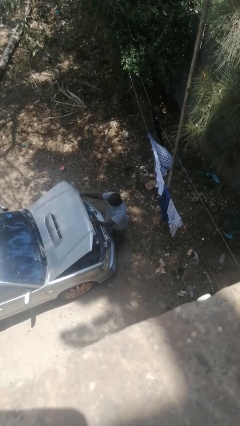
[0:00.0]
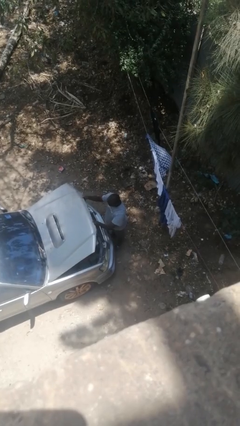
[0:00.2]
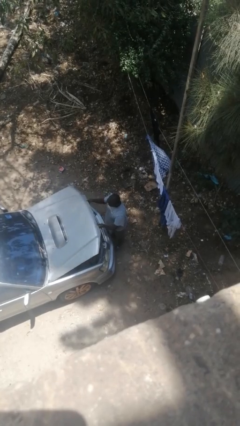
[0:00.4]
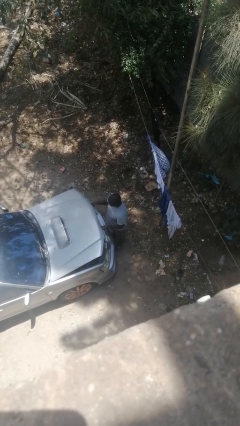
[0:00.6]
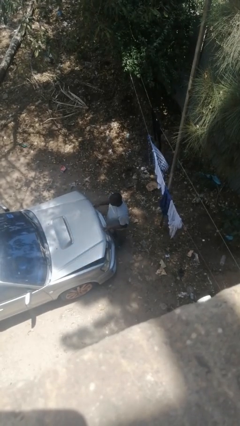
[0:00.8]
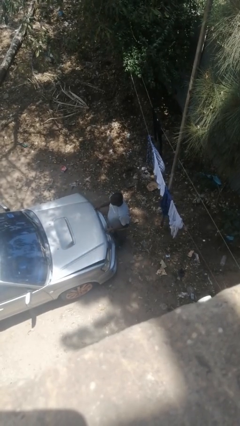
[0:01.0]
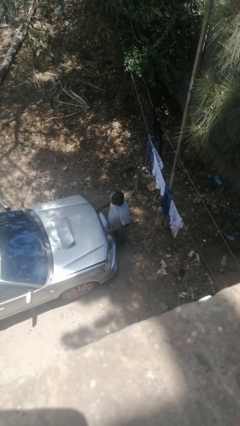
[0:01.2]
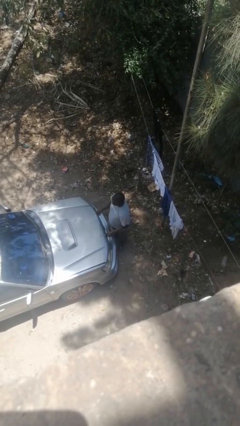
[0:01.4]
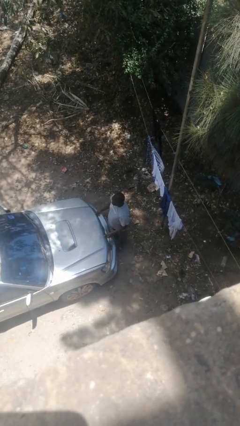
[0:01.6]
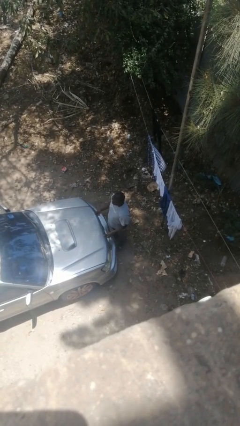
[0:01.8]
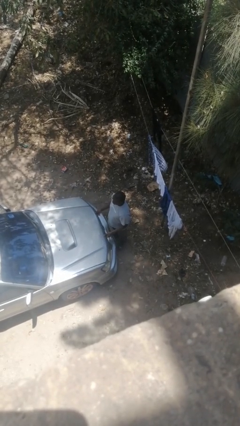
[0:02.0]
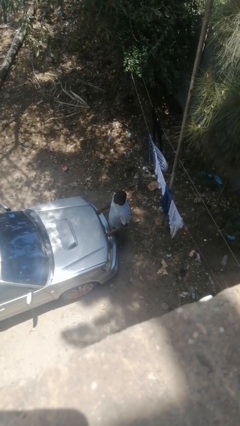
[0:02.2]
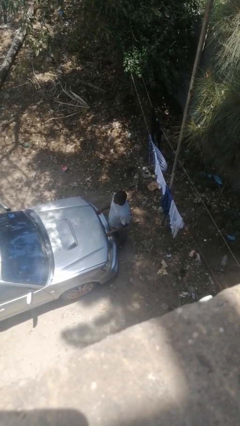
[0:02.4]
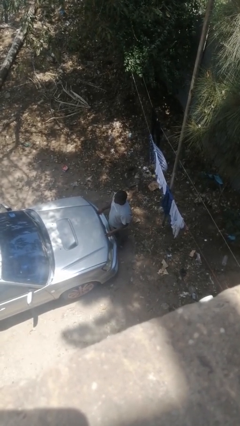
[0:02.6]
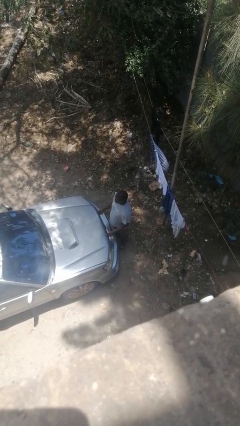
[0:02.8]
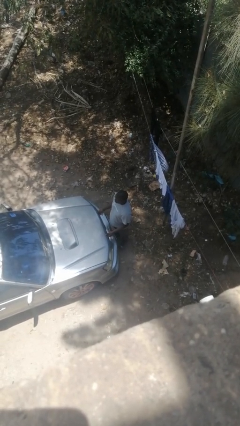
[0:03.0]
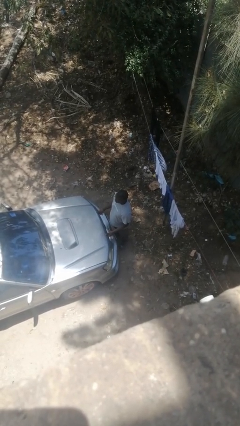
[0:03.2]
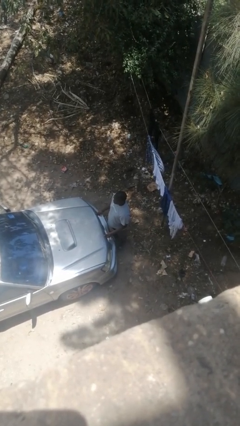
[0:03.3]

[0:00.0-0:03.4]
person closes car hood

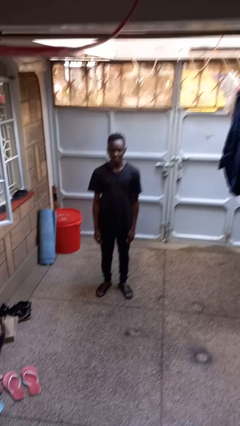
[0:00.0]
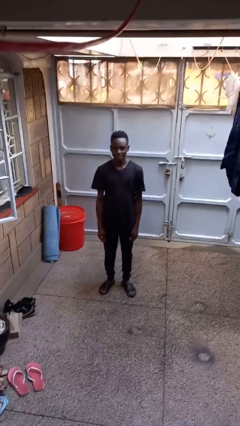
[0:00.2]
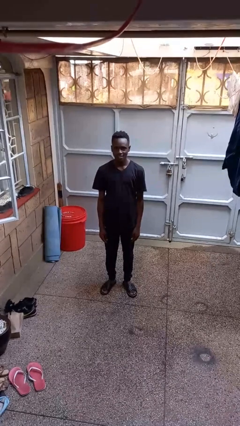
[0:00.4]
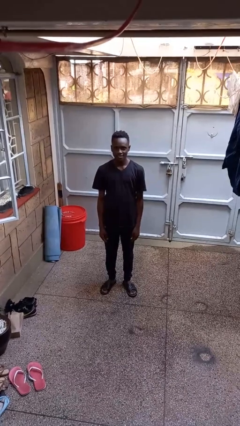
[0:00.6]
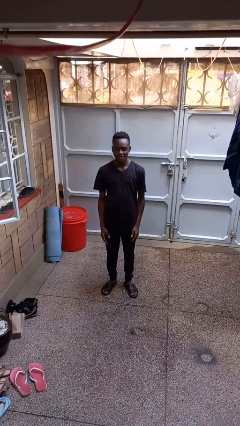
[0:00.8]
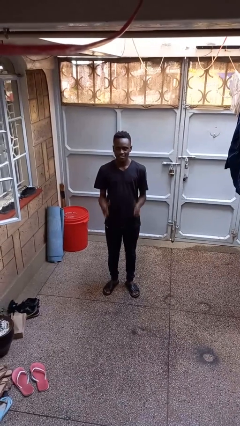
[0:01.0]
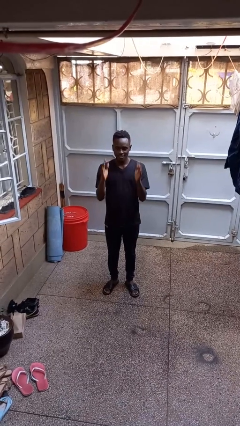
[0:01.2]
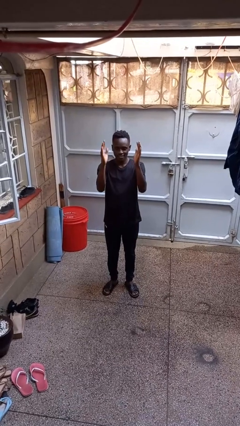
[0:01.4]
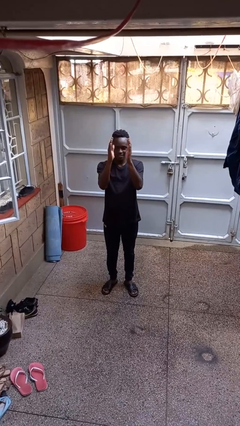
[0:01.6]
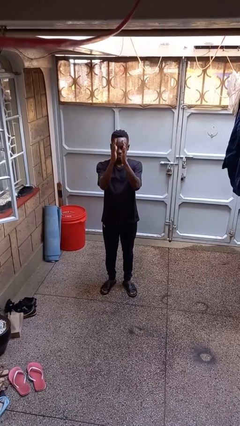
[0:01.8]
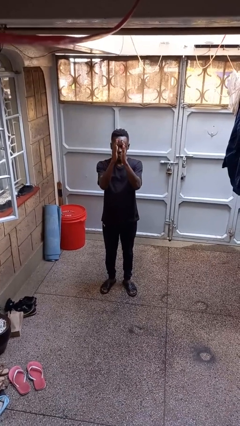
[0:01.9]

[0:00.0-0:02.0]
person gestures zoom in

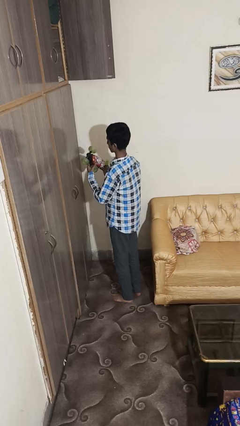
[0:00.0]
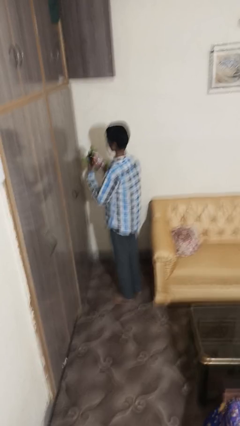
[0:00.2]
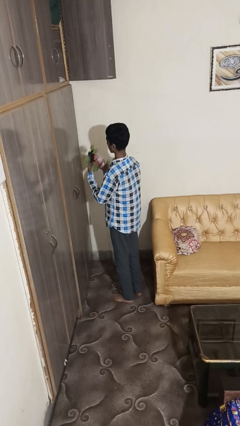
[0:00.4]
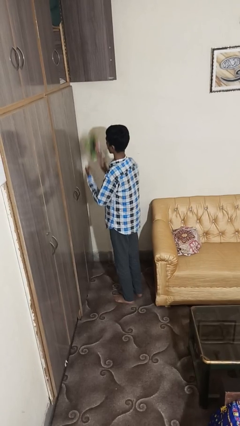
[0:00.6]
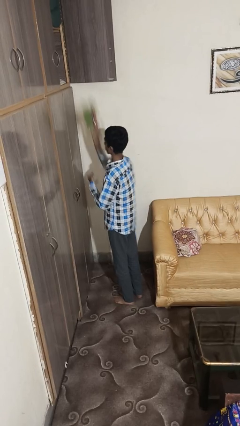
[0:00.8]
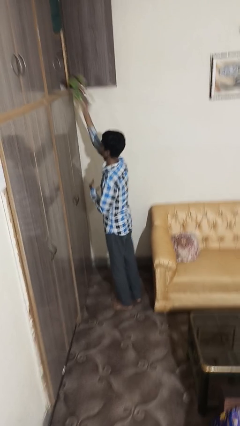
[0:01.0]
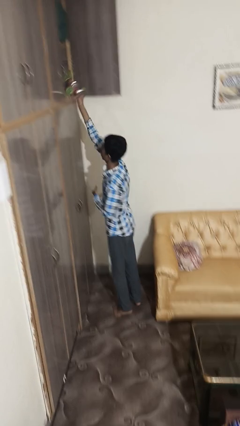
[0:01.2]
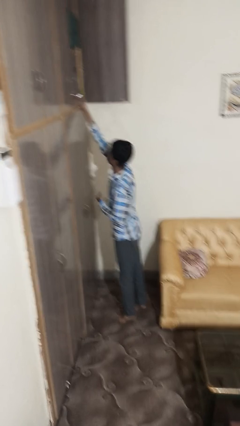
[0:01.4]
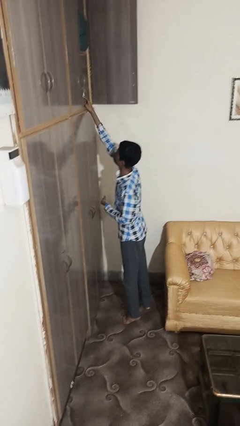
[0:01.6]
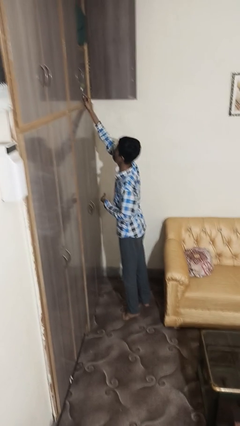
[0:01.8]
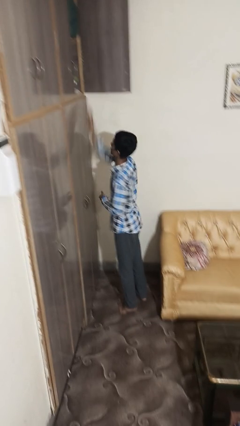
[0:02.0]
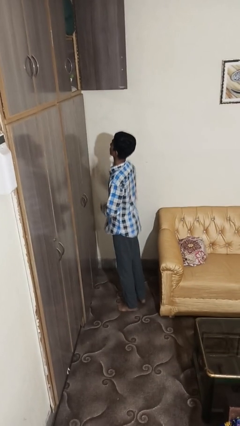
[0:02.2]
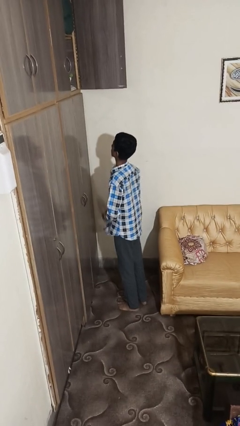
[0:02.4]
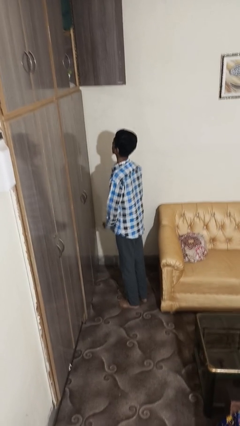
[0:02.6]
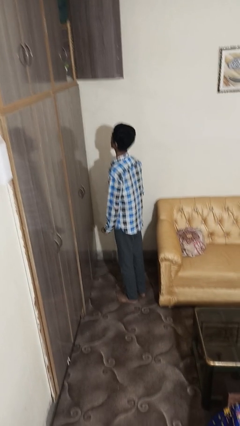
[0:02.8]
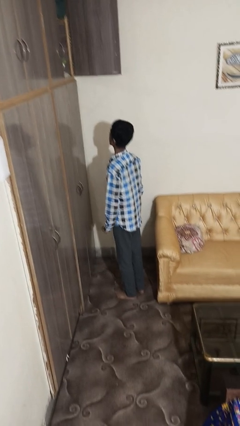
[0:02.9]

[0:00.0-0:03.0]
person puts down object on shelf

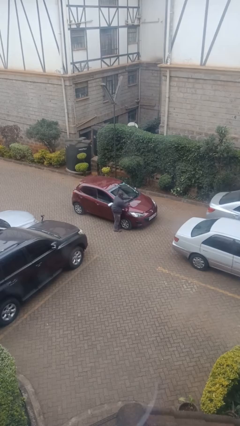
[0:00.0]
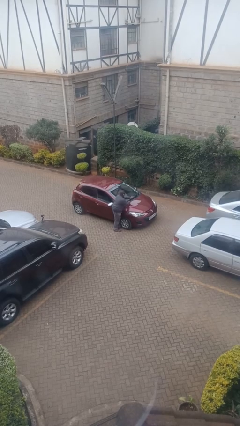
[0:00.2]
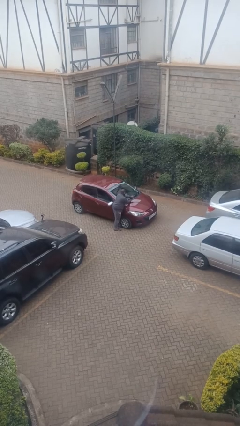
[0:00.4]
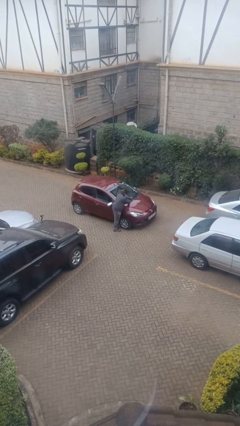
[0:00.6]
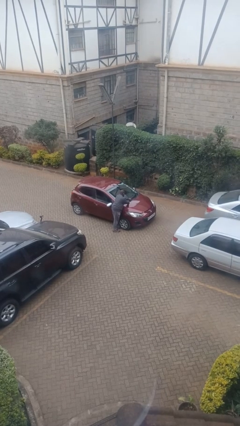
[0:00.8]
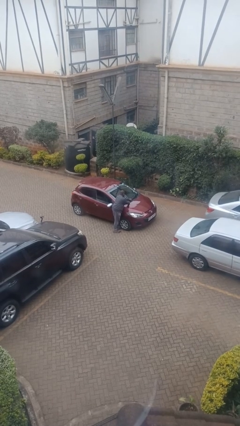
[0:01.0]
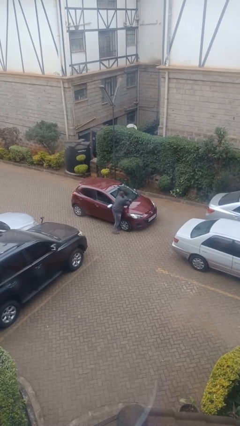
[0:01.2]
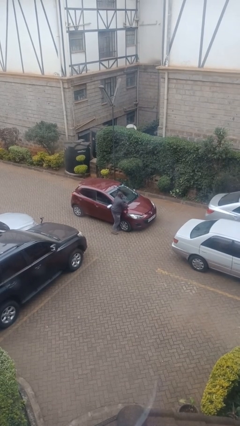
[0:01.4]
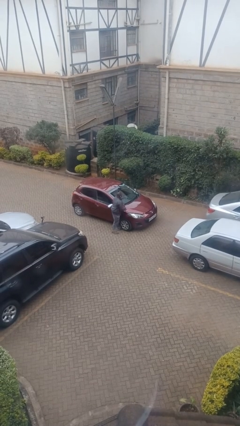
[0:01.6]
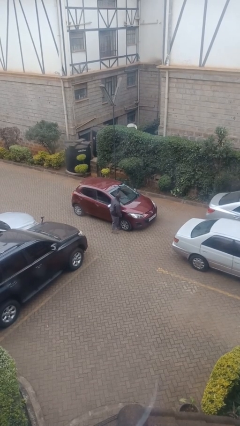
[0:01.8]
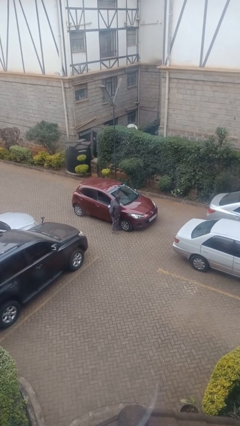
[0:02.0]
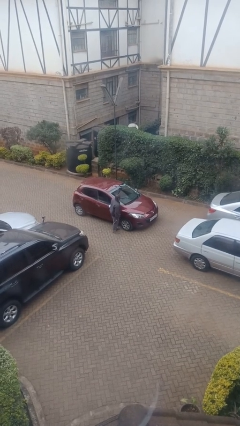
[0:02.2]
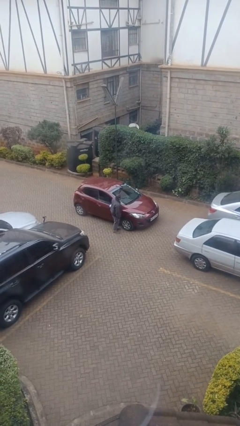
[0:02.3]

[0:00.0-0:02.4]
person flips down car wipers

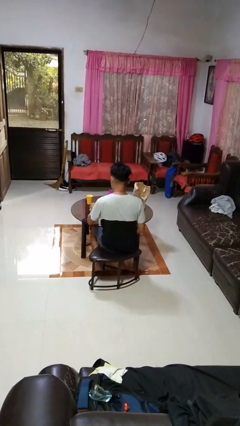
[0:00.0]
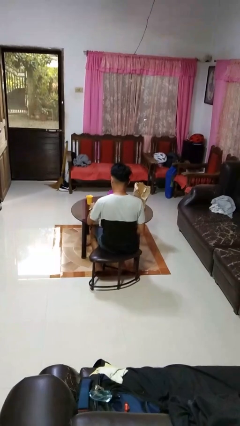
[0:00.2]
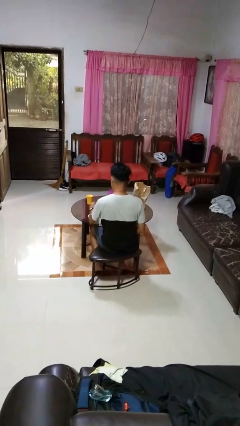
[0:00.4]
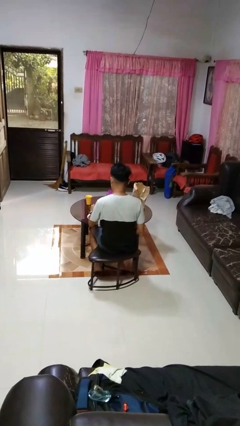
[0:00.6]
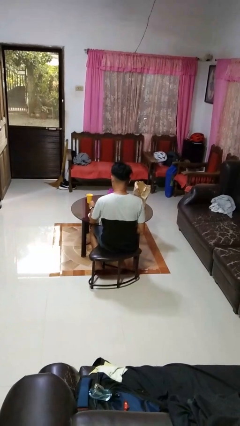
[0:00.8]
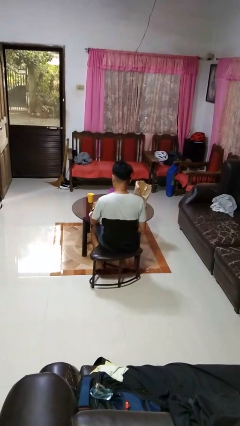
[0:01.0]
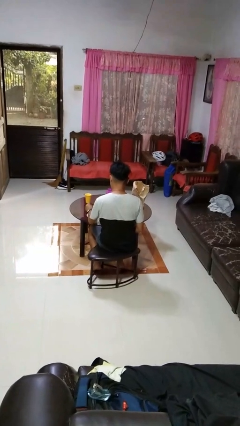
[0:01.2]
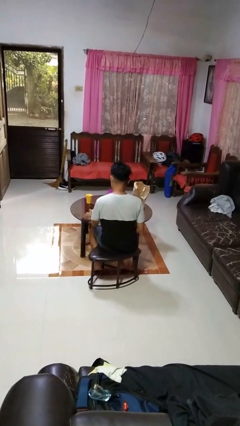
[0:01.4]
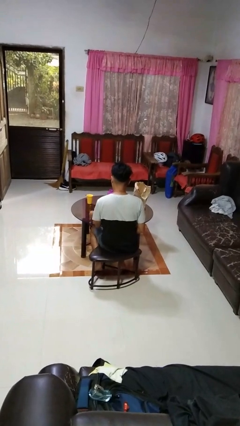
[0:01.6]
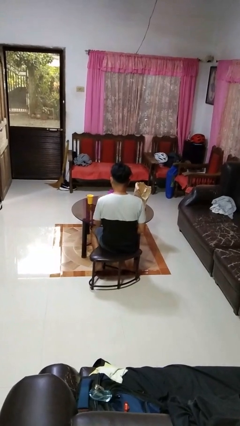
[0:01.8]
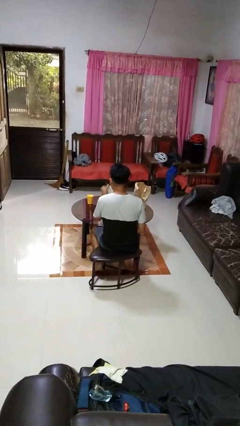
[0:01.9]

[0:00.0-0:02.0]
person stirs mug

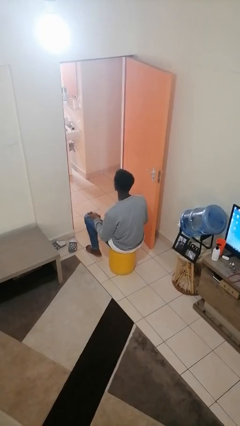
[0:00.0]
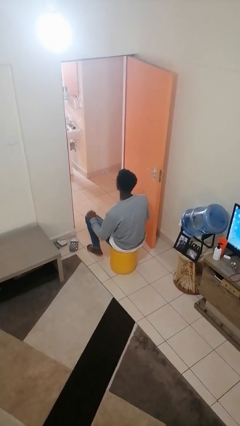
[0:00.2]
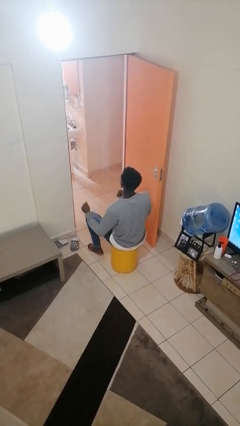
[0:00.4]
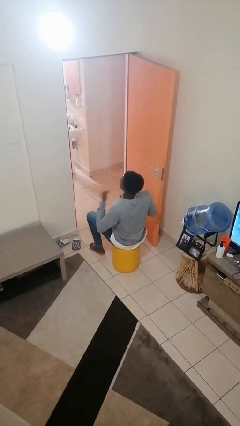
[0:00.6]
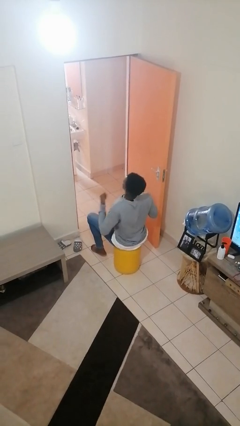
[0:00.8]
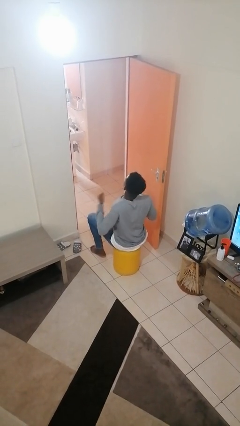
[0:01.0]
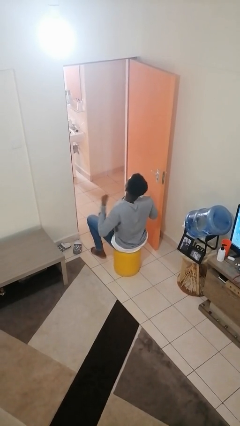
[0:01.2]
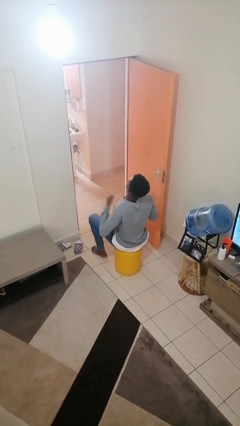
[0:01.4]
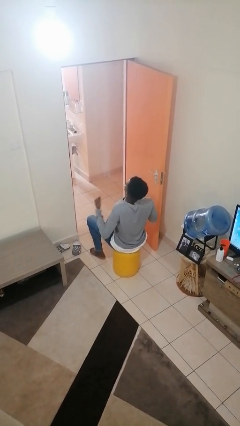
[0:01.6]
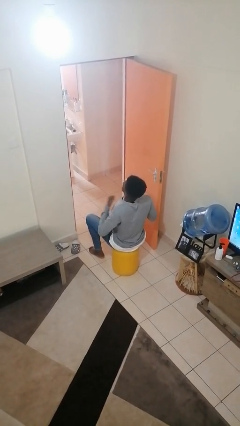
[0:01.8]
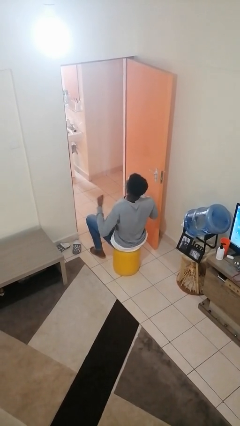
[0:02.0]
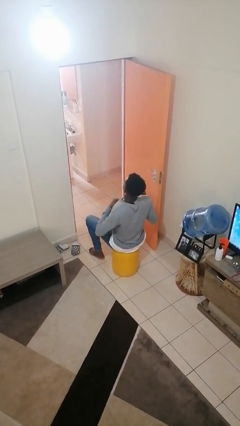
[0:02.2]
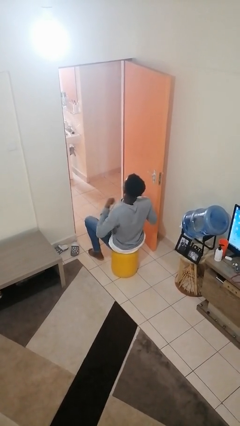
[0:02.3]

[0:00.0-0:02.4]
person drums on chest

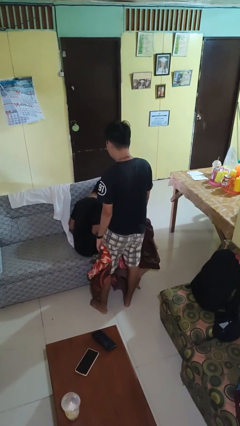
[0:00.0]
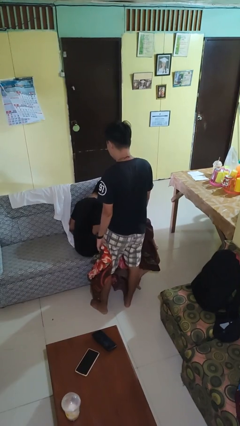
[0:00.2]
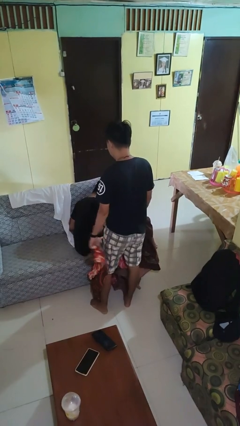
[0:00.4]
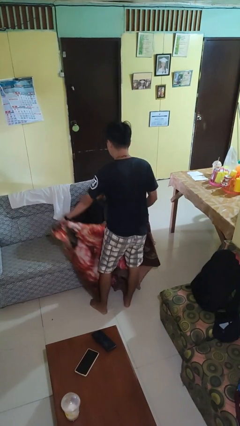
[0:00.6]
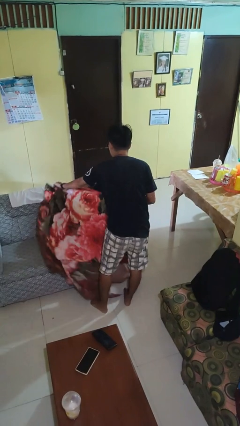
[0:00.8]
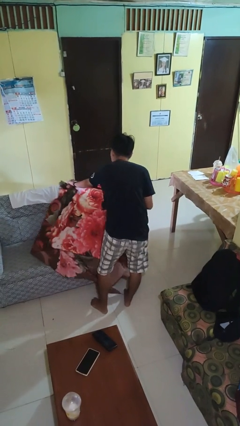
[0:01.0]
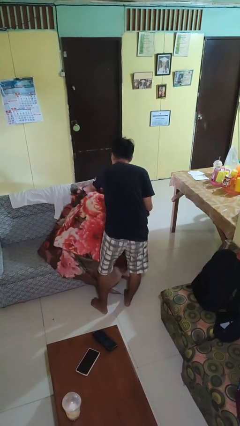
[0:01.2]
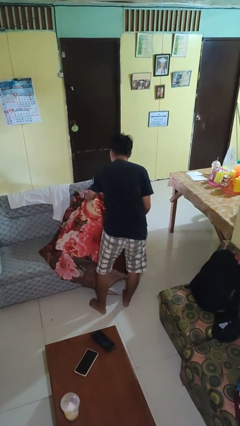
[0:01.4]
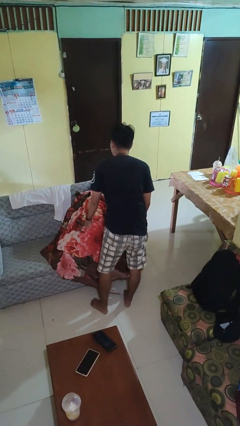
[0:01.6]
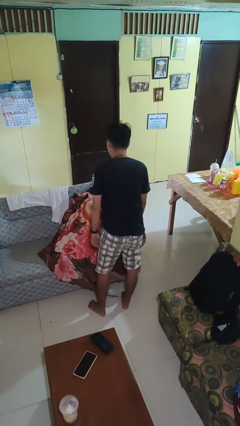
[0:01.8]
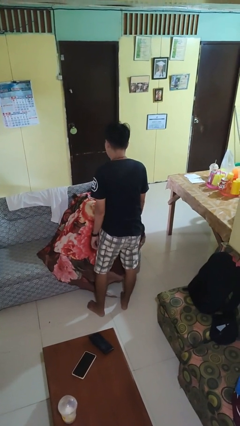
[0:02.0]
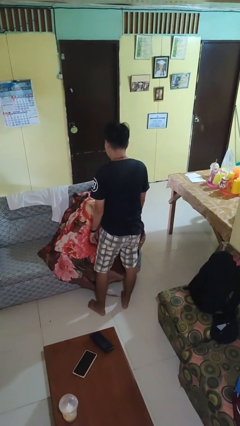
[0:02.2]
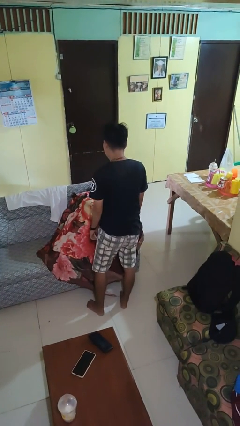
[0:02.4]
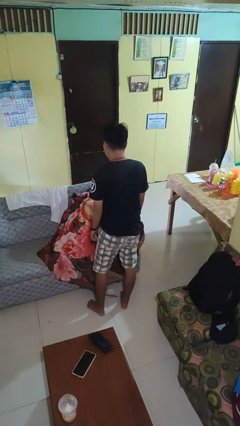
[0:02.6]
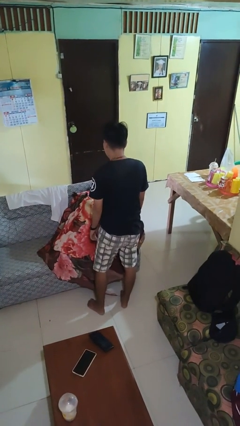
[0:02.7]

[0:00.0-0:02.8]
person covers friend with blanket
